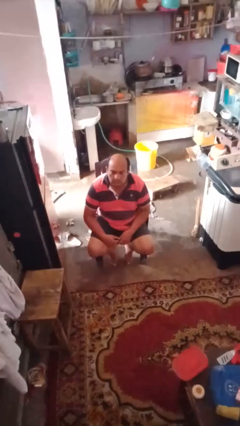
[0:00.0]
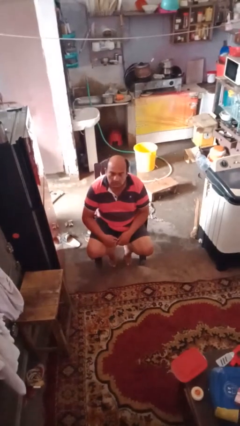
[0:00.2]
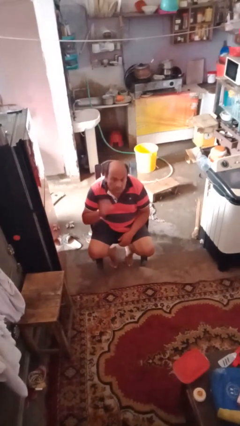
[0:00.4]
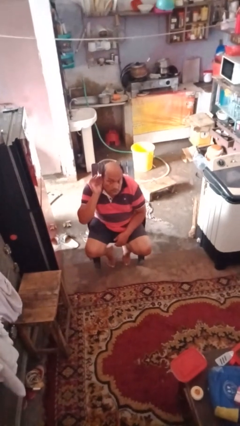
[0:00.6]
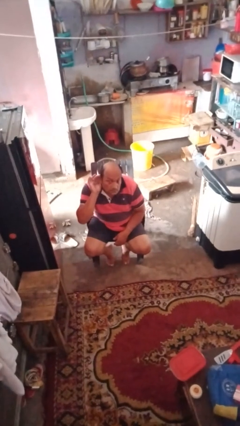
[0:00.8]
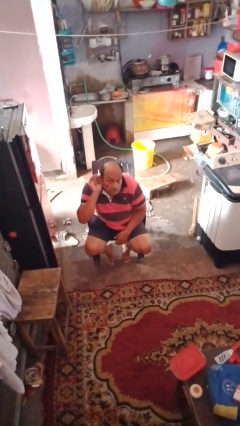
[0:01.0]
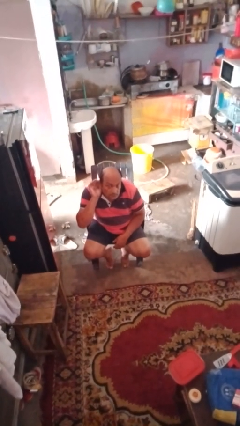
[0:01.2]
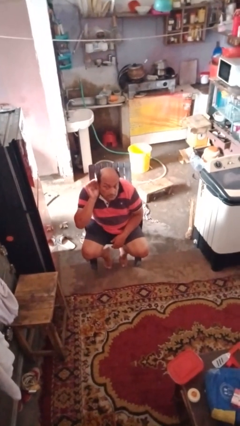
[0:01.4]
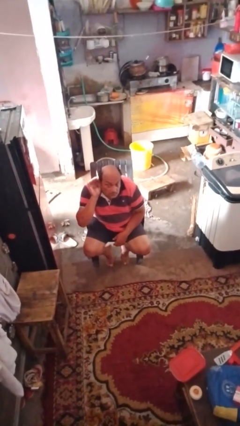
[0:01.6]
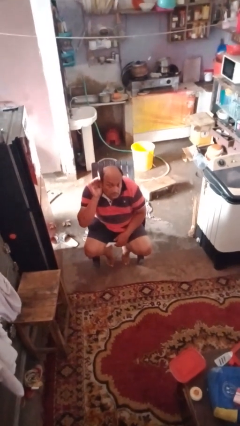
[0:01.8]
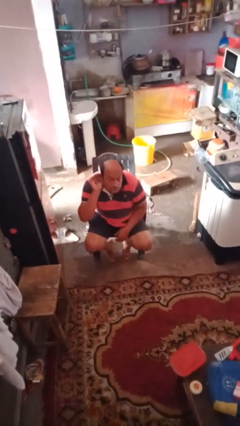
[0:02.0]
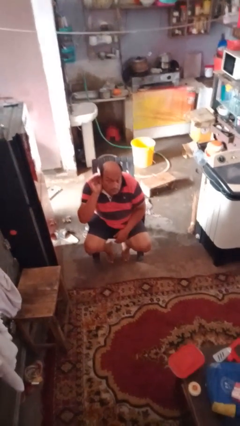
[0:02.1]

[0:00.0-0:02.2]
person gestures listen closely

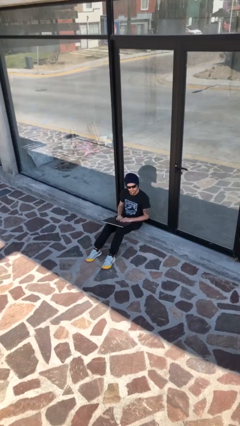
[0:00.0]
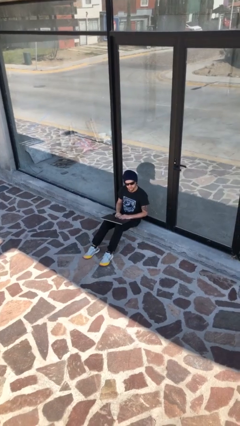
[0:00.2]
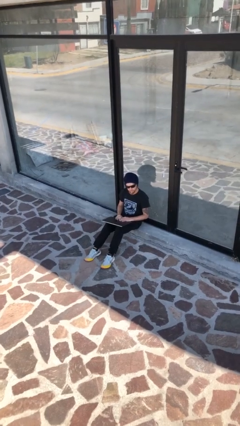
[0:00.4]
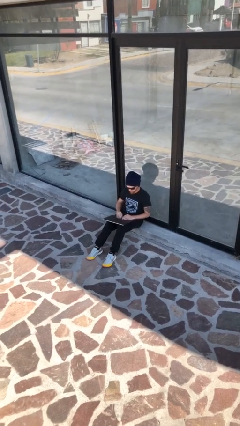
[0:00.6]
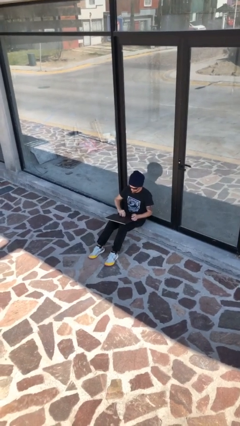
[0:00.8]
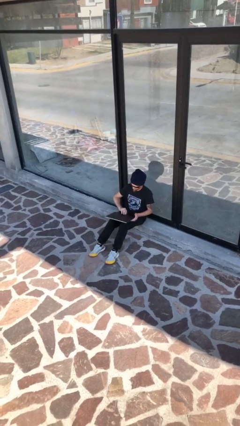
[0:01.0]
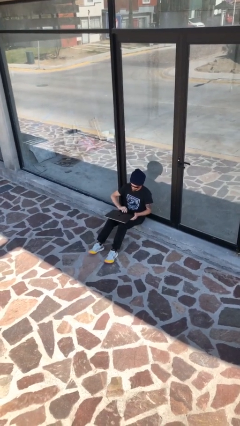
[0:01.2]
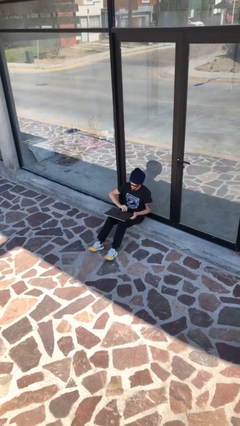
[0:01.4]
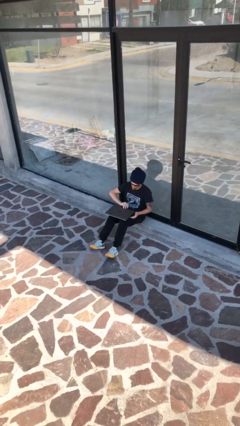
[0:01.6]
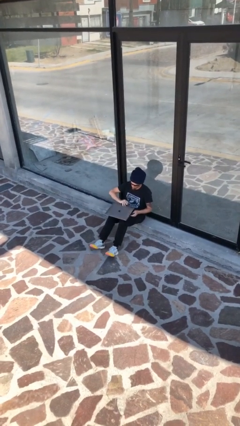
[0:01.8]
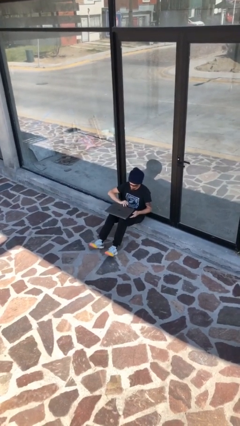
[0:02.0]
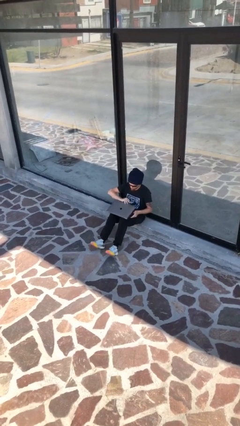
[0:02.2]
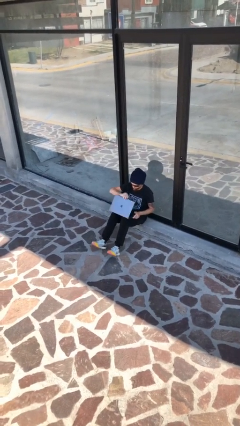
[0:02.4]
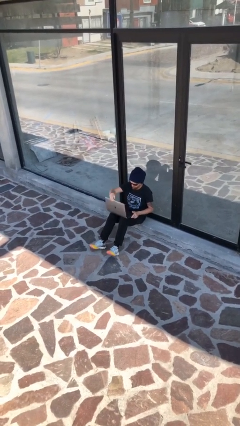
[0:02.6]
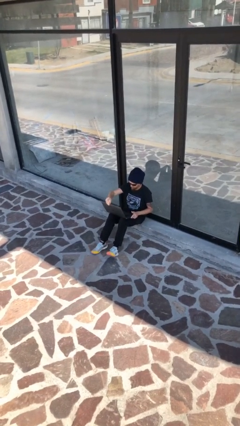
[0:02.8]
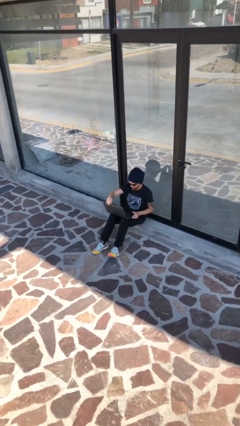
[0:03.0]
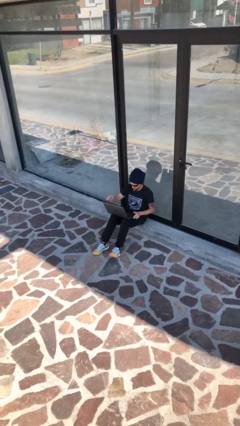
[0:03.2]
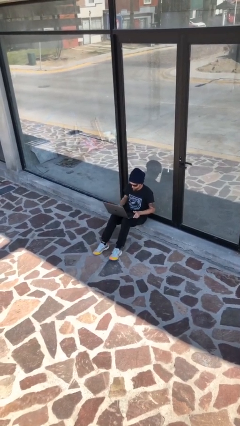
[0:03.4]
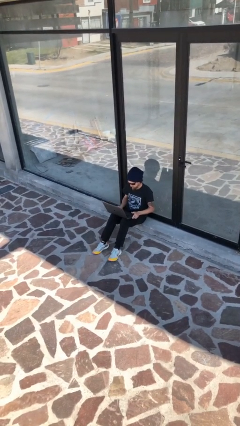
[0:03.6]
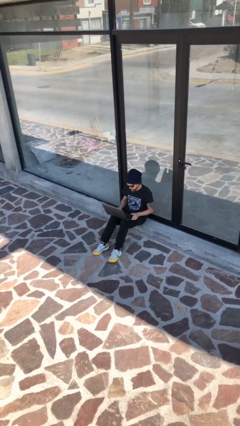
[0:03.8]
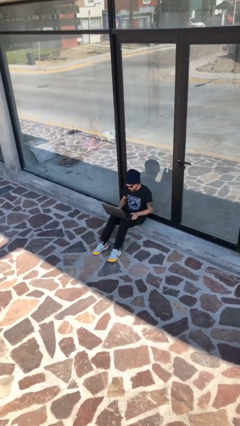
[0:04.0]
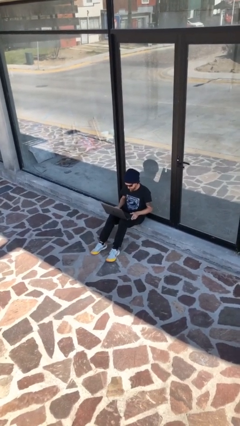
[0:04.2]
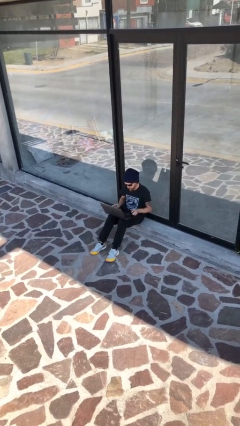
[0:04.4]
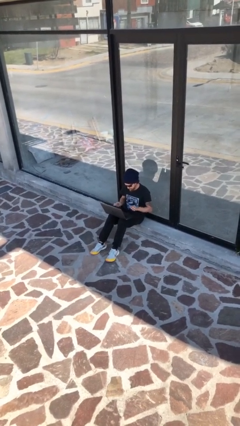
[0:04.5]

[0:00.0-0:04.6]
person interacts with laptop

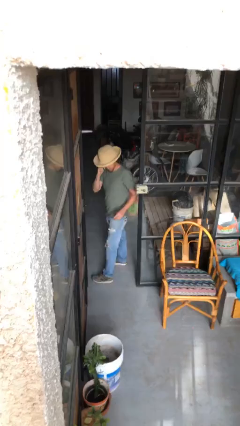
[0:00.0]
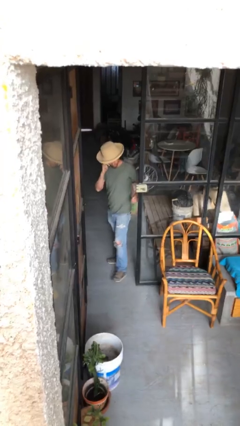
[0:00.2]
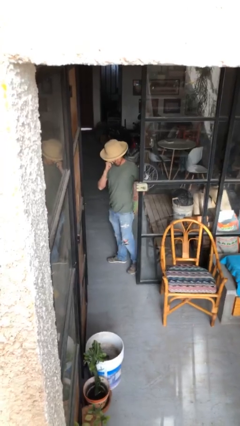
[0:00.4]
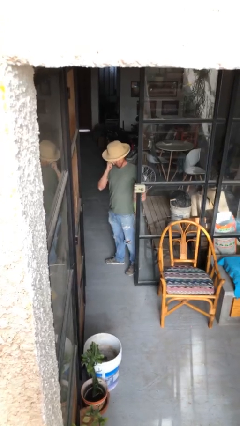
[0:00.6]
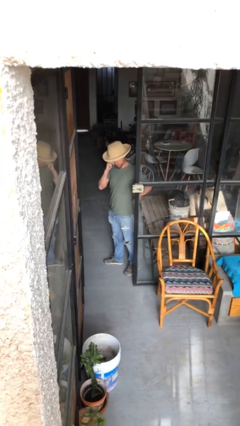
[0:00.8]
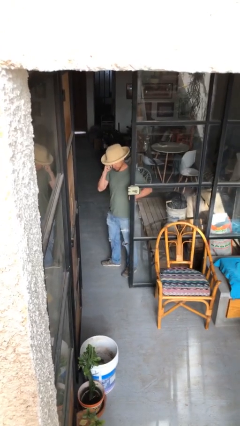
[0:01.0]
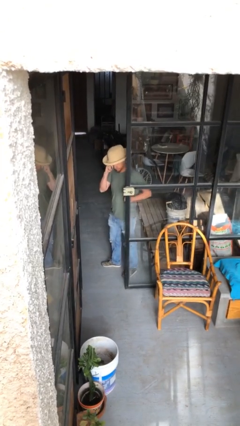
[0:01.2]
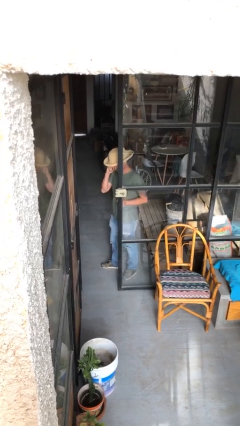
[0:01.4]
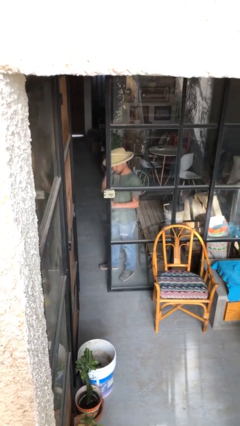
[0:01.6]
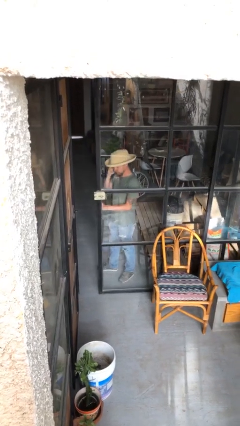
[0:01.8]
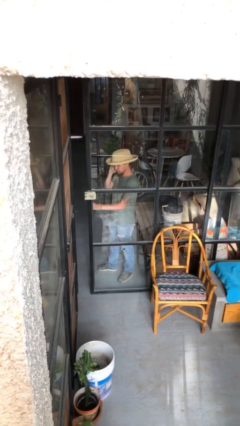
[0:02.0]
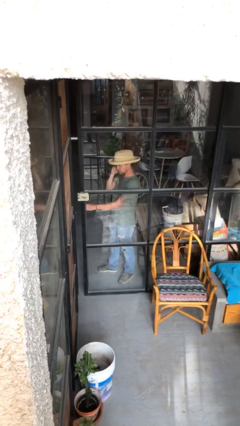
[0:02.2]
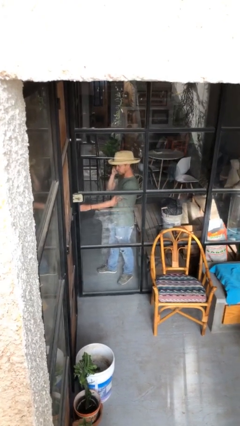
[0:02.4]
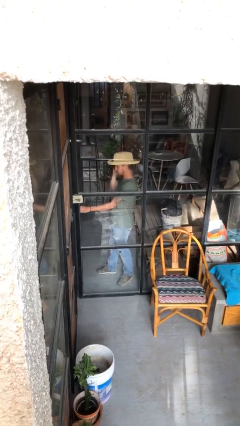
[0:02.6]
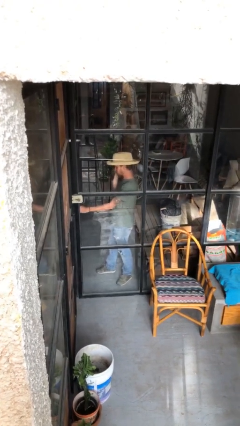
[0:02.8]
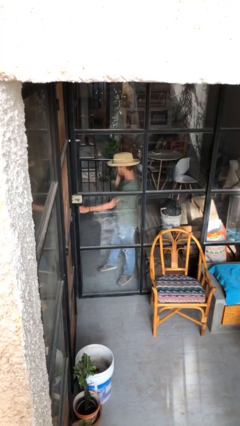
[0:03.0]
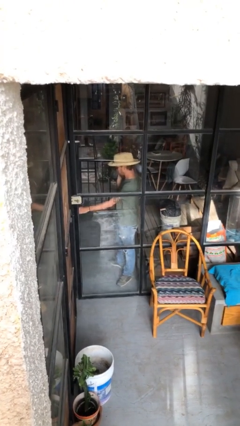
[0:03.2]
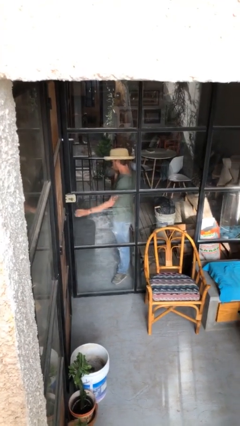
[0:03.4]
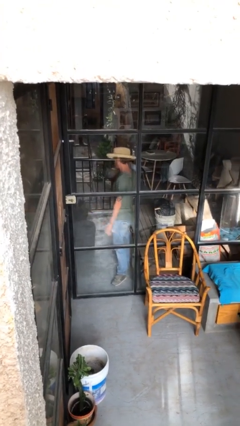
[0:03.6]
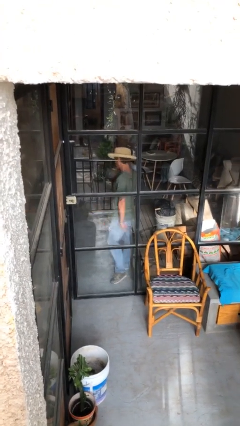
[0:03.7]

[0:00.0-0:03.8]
person closes facility door

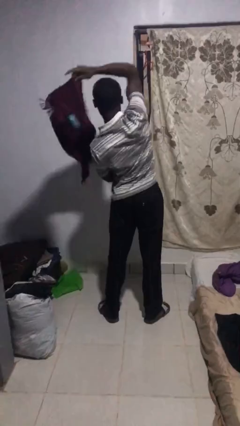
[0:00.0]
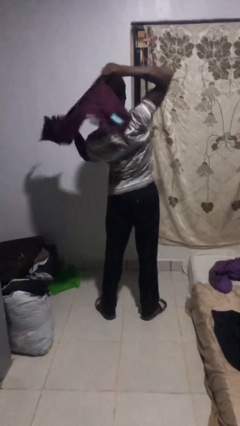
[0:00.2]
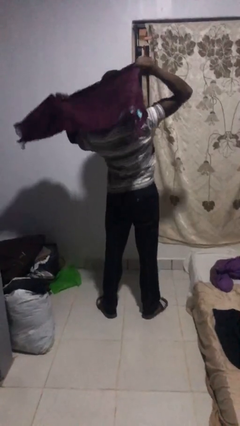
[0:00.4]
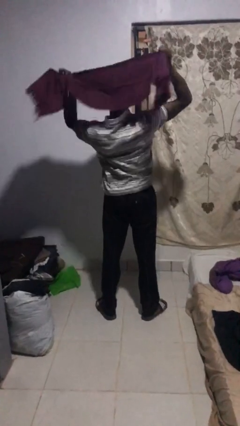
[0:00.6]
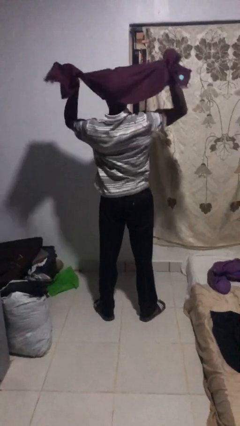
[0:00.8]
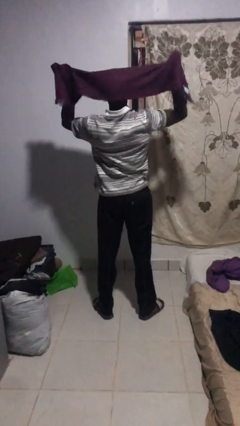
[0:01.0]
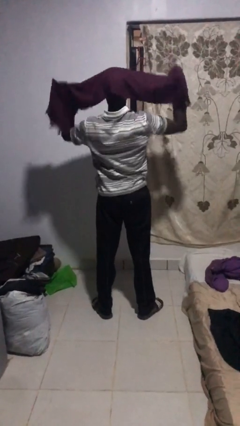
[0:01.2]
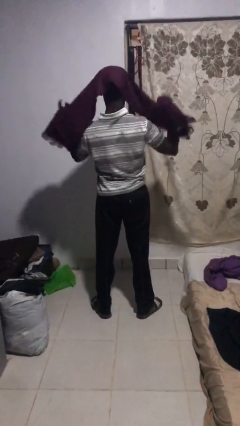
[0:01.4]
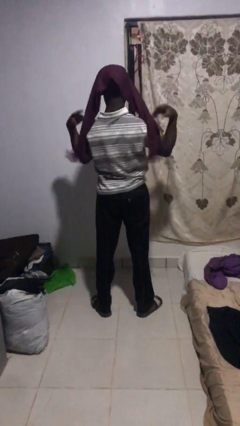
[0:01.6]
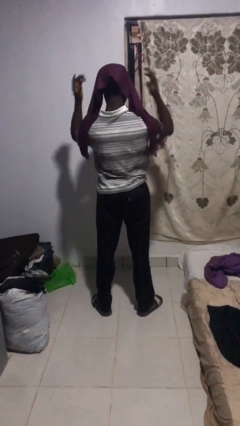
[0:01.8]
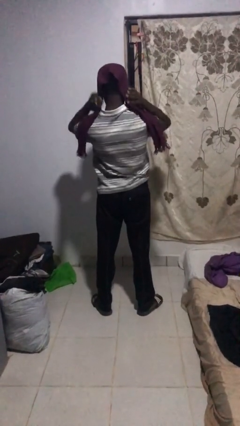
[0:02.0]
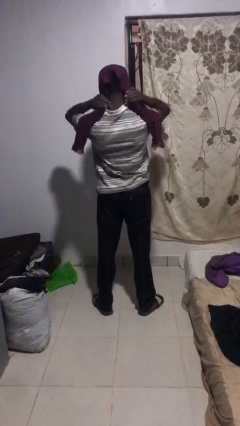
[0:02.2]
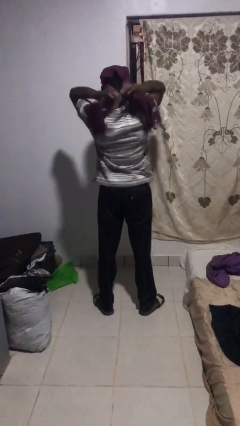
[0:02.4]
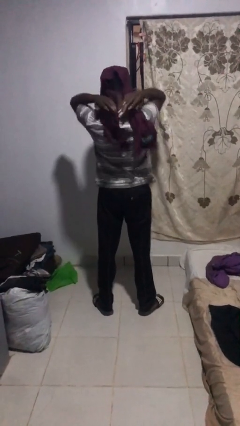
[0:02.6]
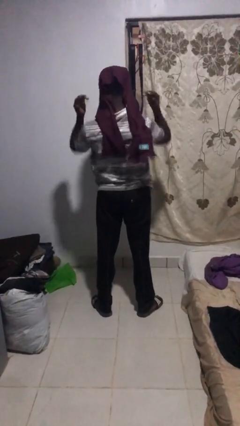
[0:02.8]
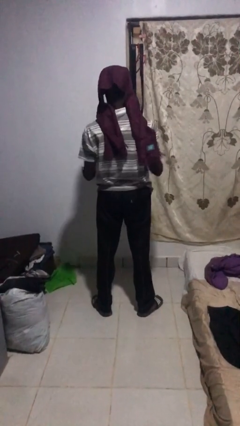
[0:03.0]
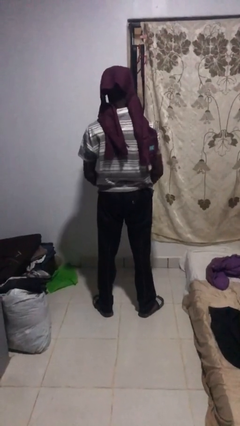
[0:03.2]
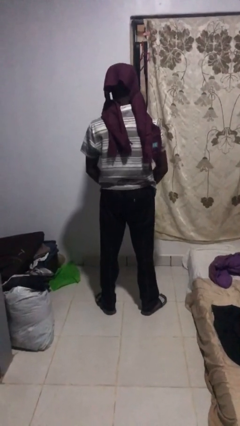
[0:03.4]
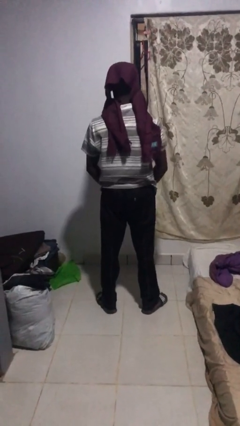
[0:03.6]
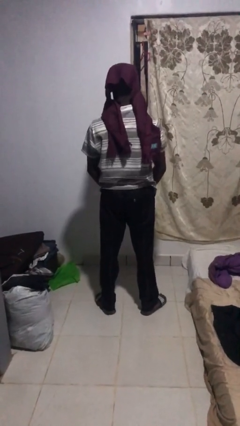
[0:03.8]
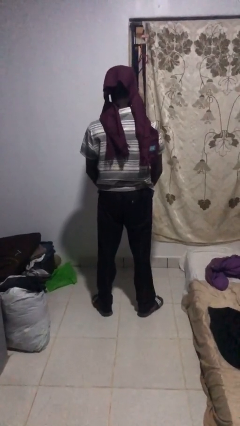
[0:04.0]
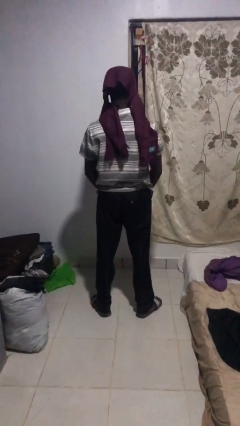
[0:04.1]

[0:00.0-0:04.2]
person puts on scarf

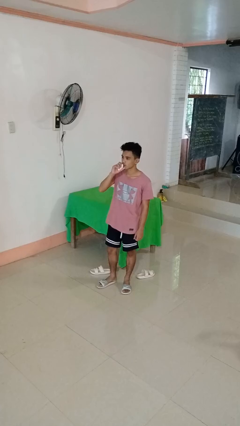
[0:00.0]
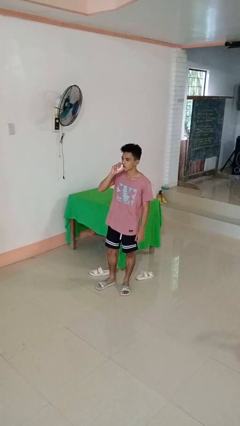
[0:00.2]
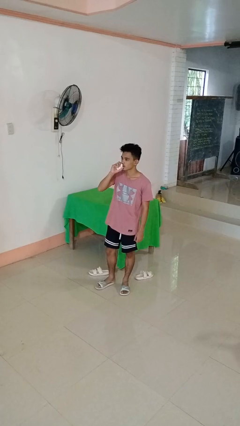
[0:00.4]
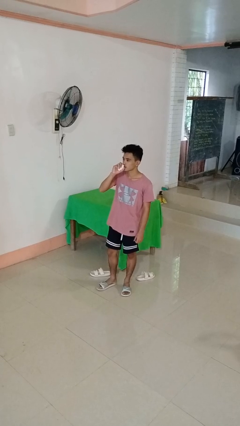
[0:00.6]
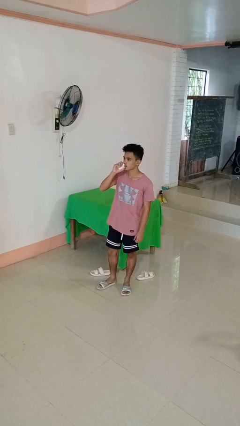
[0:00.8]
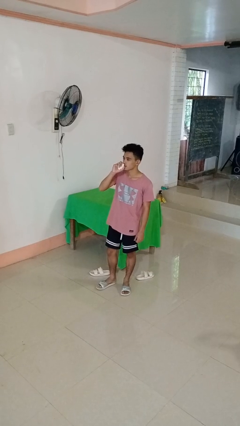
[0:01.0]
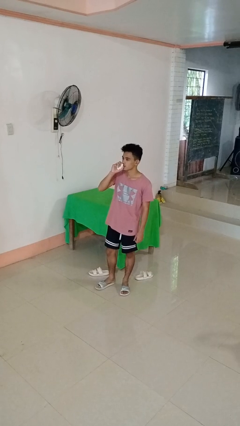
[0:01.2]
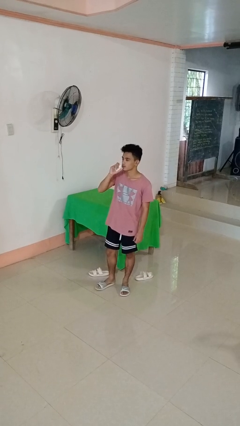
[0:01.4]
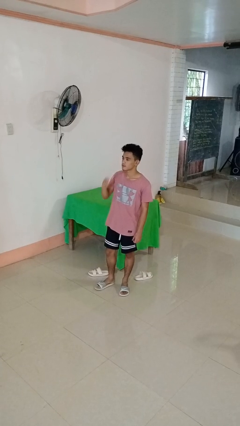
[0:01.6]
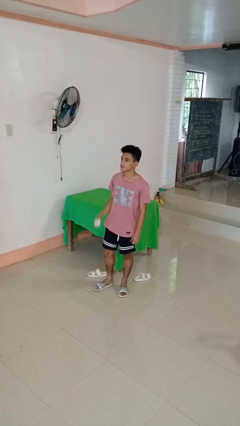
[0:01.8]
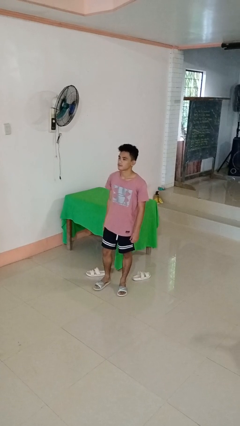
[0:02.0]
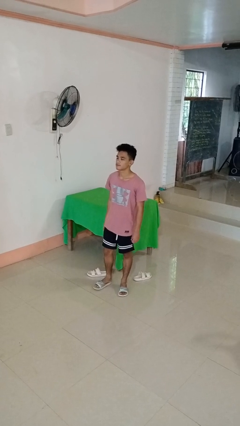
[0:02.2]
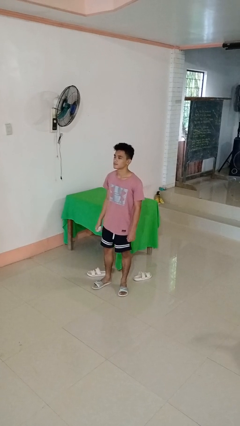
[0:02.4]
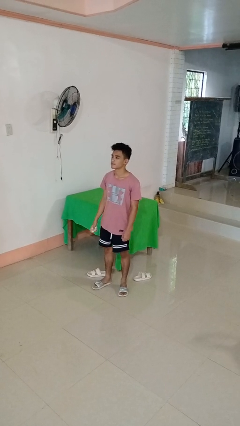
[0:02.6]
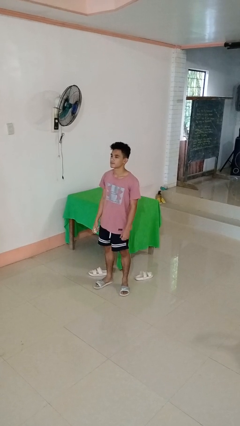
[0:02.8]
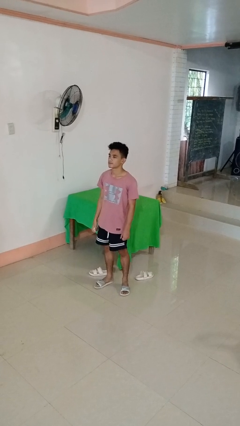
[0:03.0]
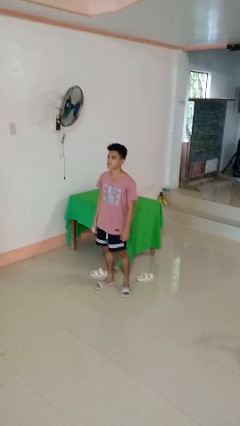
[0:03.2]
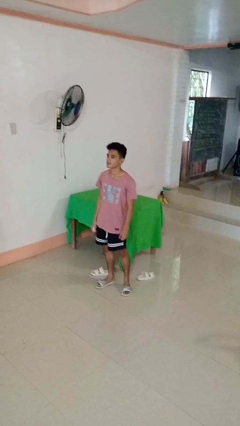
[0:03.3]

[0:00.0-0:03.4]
person vapes
